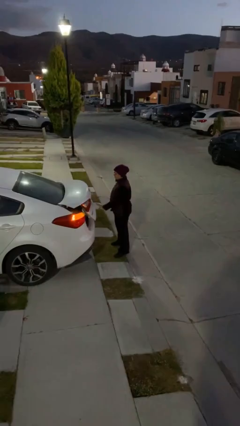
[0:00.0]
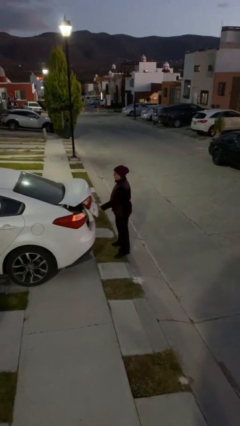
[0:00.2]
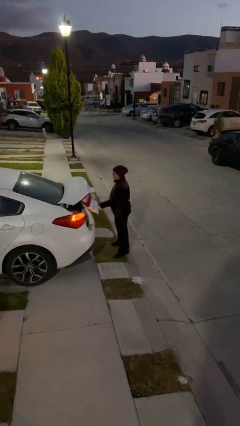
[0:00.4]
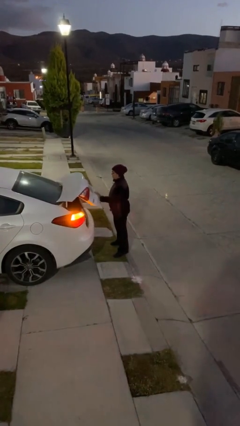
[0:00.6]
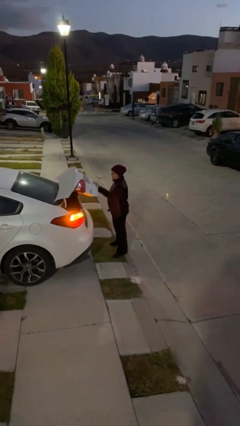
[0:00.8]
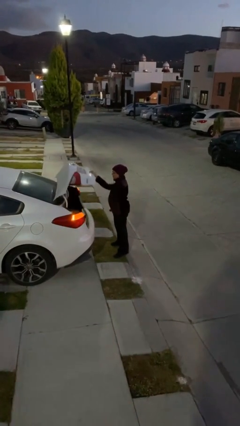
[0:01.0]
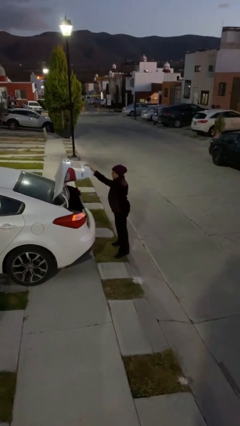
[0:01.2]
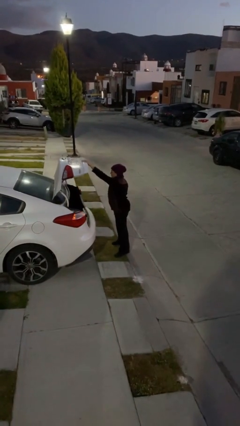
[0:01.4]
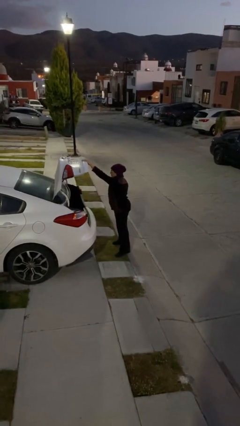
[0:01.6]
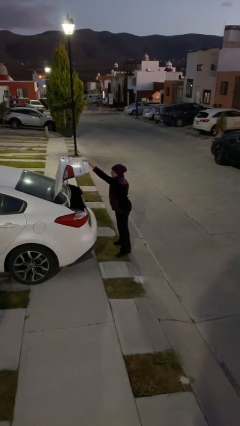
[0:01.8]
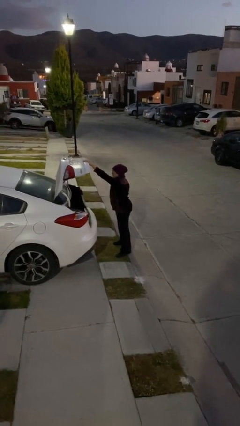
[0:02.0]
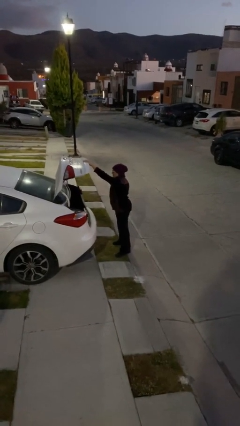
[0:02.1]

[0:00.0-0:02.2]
person opens car trunk

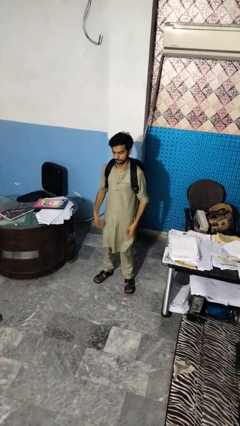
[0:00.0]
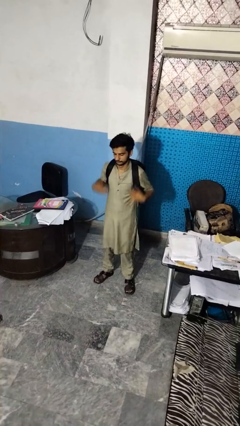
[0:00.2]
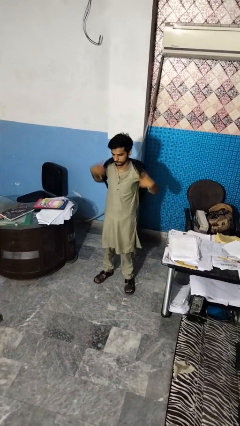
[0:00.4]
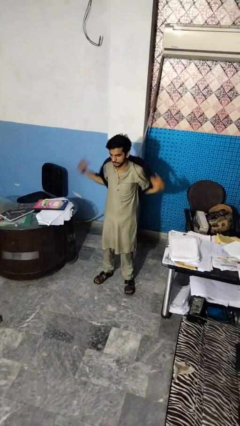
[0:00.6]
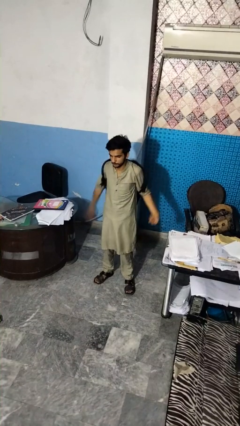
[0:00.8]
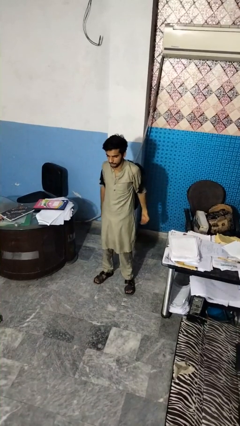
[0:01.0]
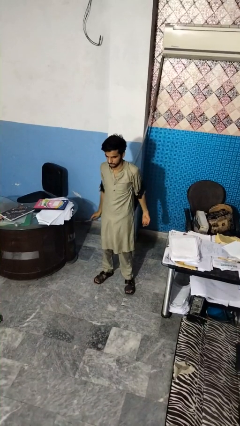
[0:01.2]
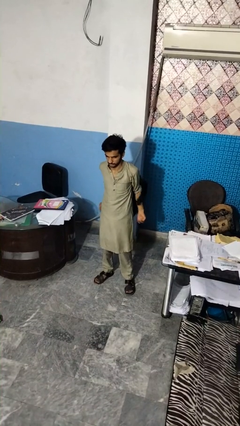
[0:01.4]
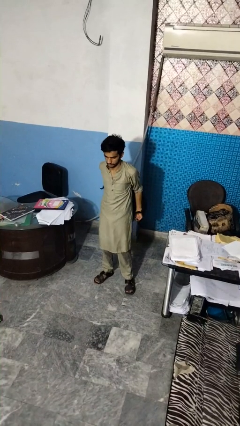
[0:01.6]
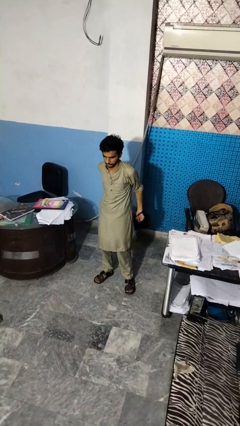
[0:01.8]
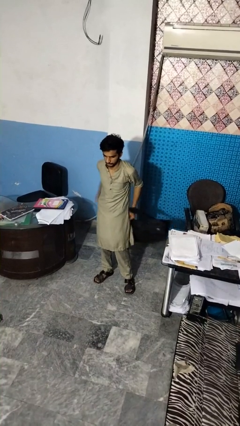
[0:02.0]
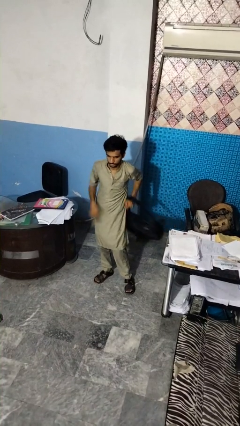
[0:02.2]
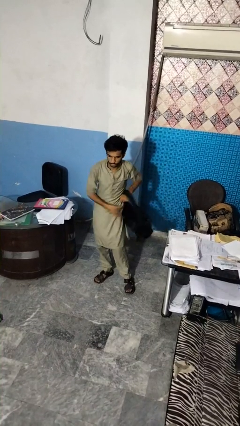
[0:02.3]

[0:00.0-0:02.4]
person takes off backpack

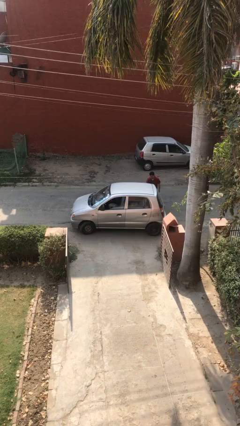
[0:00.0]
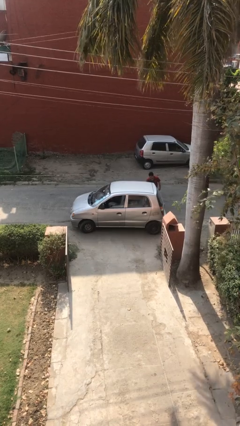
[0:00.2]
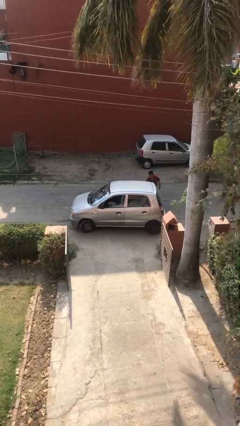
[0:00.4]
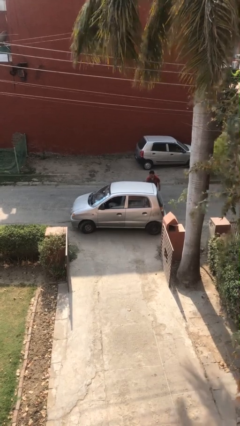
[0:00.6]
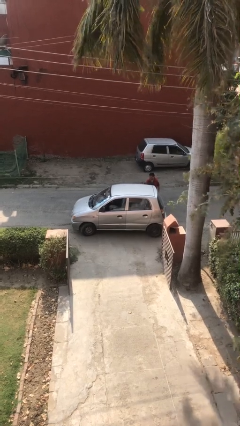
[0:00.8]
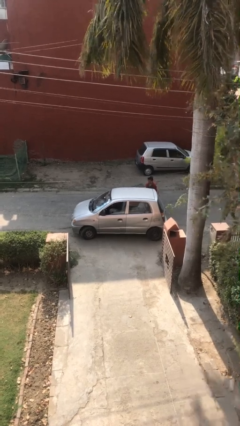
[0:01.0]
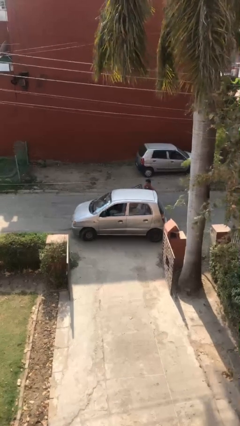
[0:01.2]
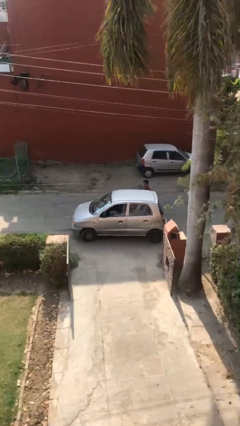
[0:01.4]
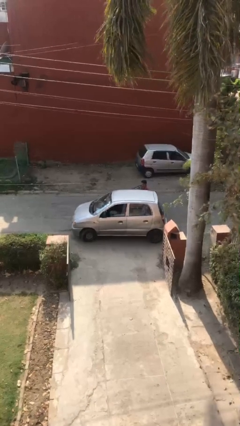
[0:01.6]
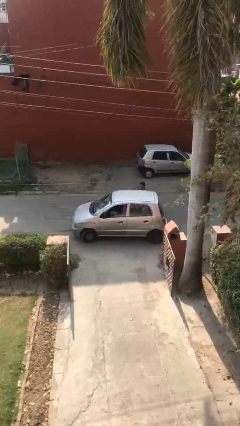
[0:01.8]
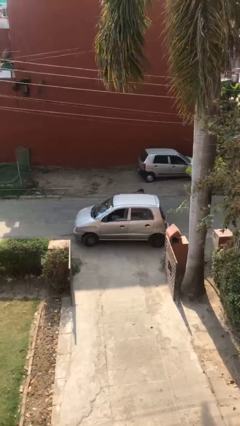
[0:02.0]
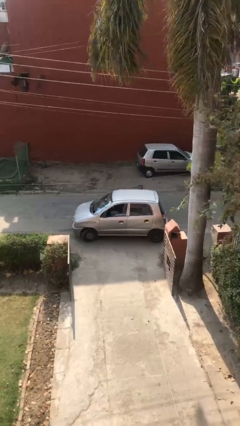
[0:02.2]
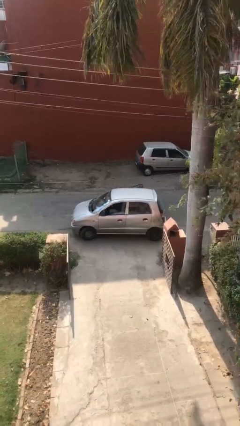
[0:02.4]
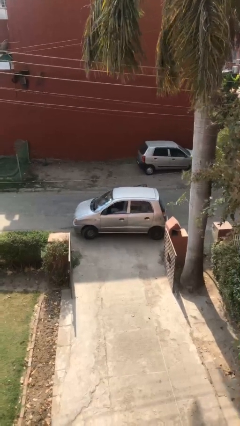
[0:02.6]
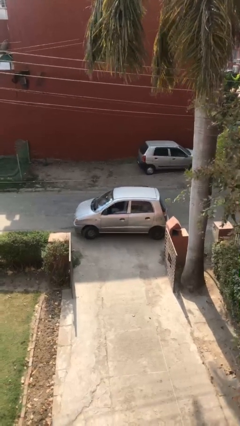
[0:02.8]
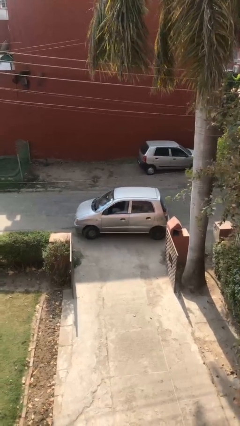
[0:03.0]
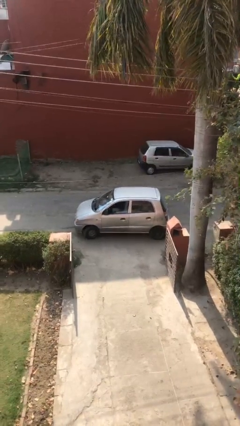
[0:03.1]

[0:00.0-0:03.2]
car picks up person

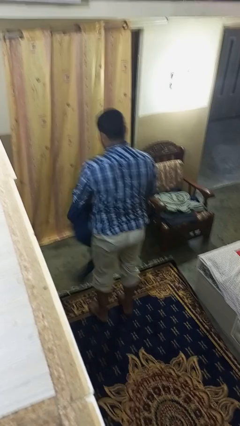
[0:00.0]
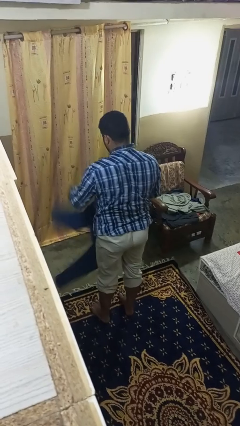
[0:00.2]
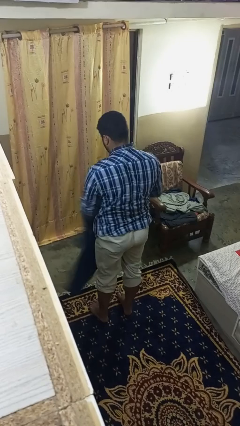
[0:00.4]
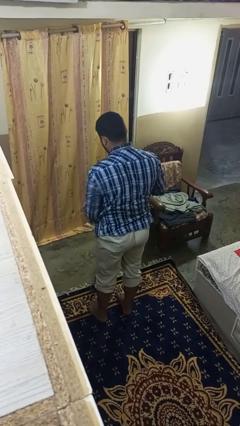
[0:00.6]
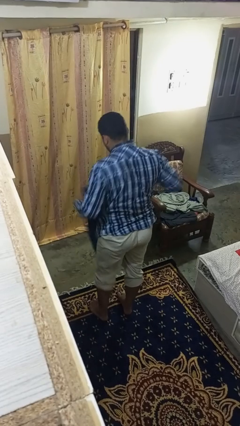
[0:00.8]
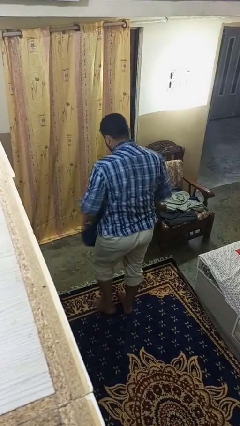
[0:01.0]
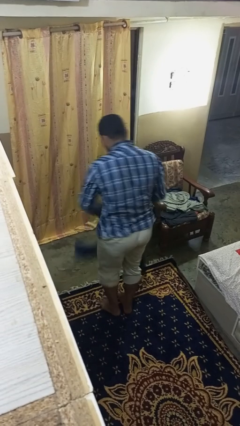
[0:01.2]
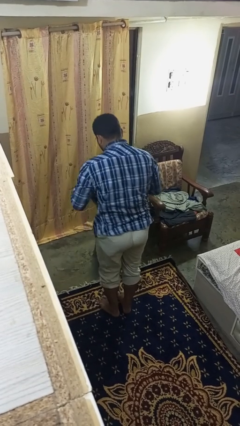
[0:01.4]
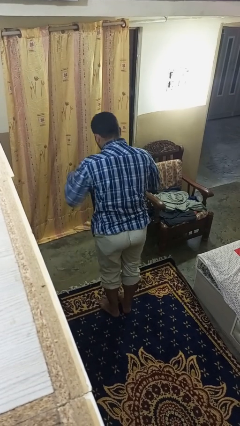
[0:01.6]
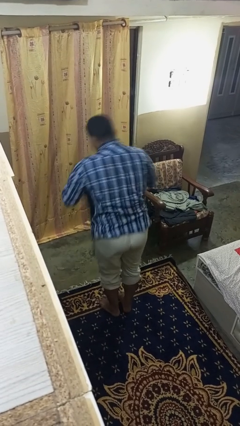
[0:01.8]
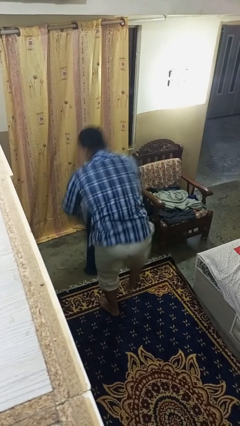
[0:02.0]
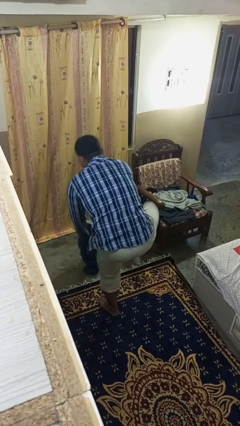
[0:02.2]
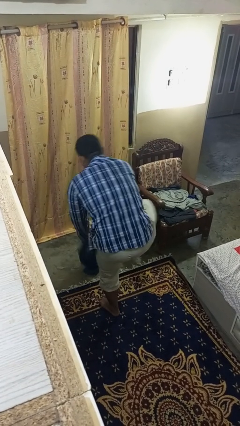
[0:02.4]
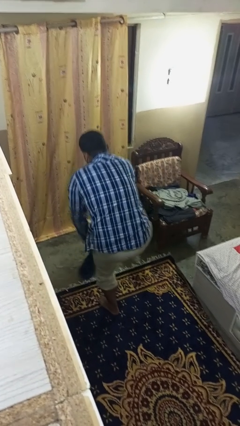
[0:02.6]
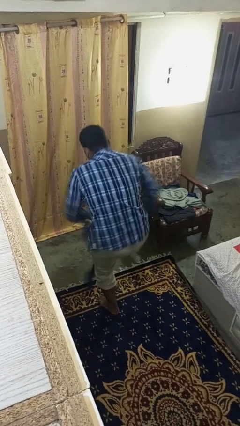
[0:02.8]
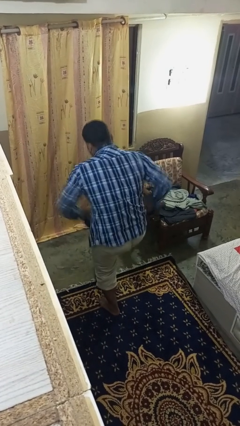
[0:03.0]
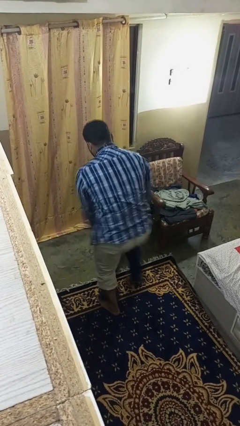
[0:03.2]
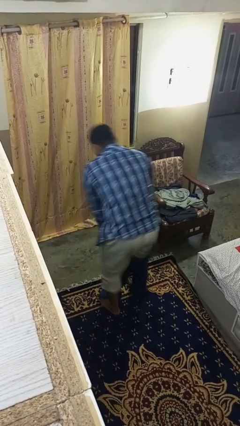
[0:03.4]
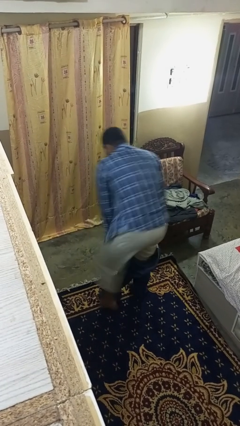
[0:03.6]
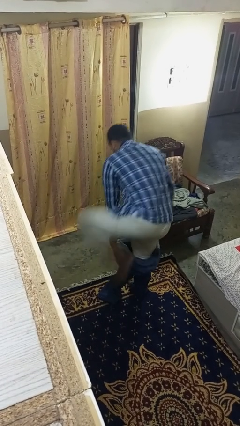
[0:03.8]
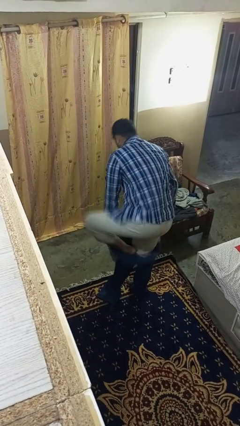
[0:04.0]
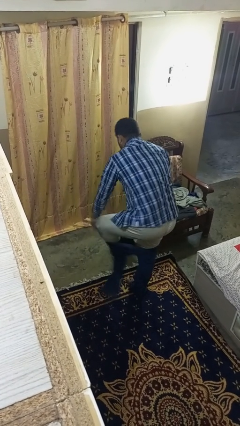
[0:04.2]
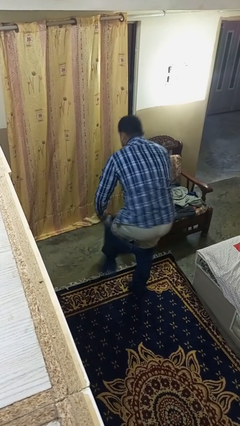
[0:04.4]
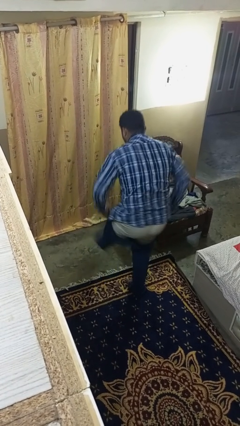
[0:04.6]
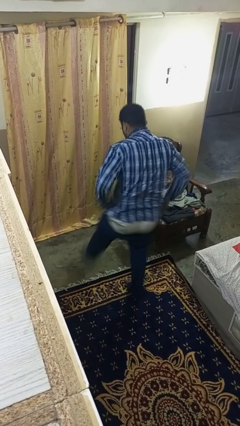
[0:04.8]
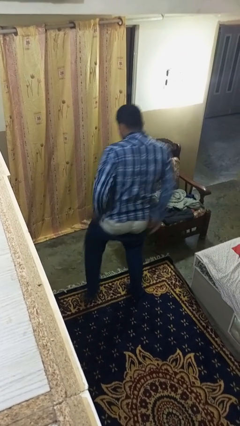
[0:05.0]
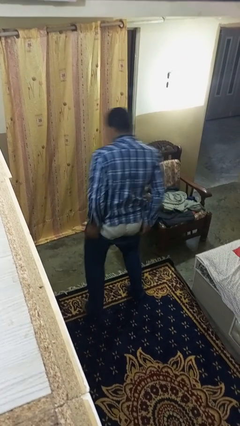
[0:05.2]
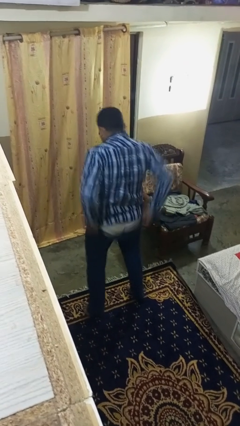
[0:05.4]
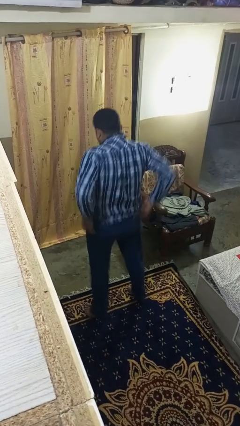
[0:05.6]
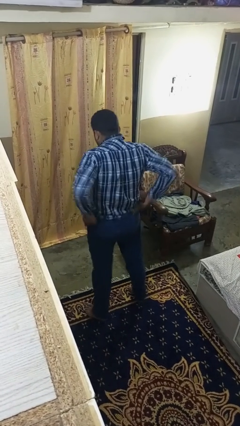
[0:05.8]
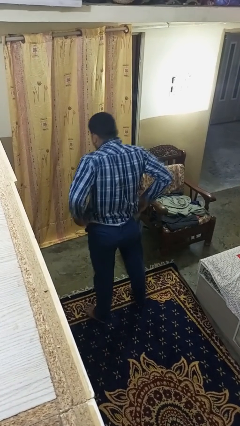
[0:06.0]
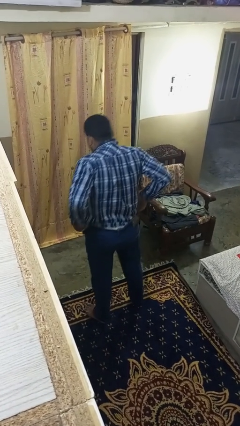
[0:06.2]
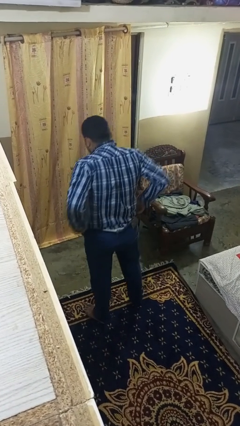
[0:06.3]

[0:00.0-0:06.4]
person puts on pants

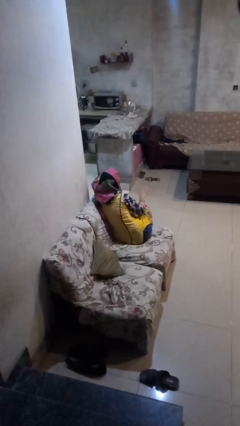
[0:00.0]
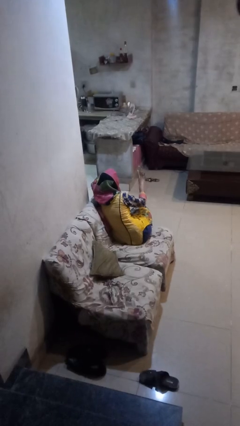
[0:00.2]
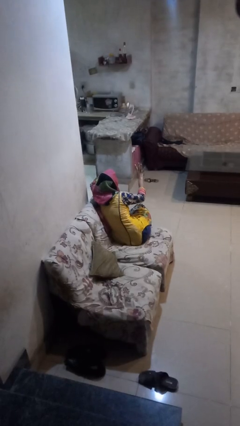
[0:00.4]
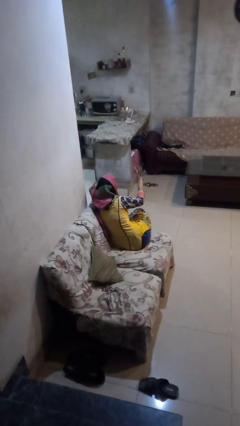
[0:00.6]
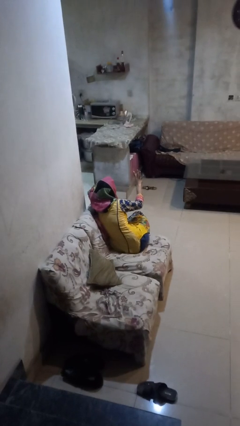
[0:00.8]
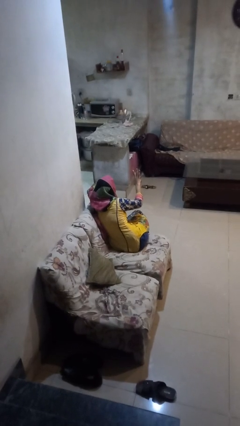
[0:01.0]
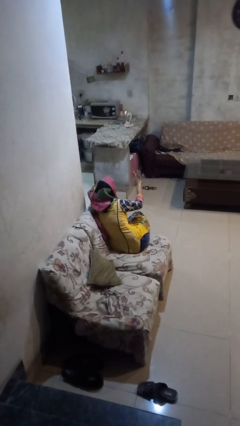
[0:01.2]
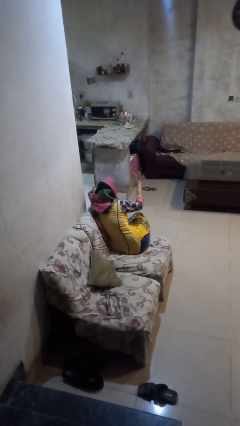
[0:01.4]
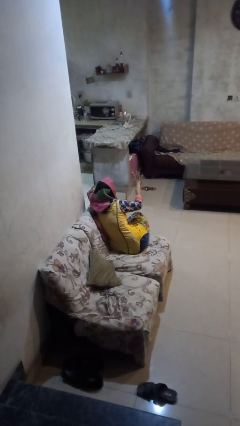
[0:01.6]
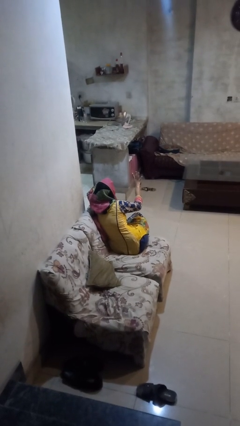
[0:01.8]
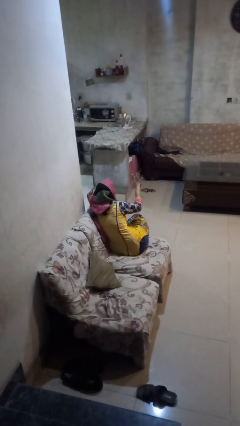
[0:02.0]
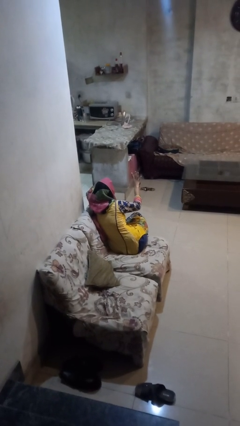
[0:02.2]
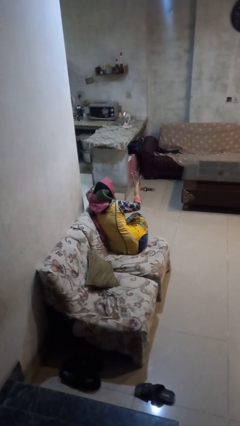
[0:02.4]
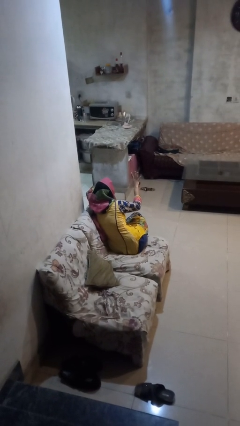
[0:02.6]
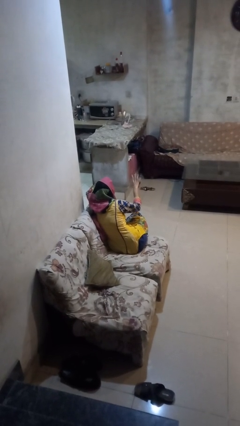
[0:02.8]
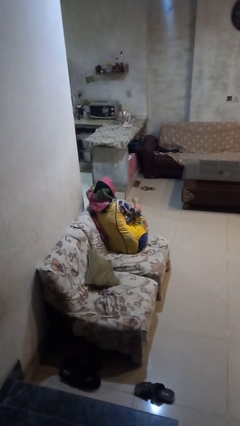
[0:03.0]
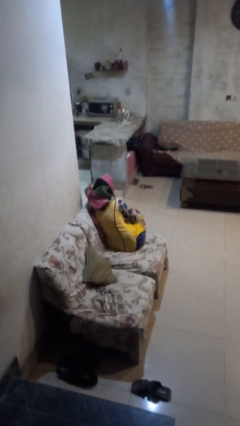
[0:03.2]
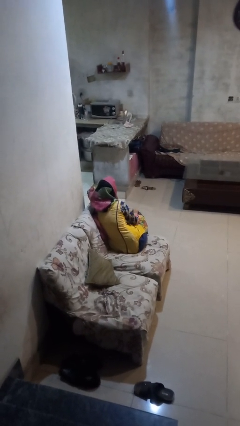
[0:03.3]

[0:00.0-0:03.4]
person gestures number four

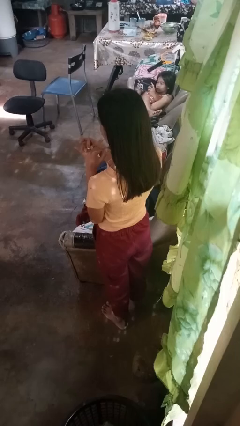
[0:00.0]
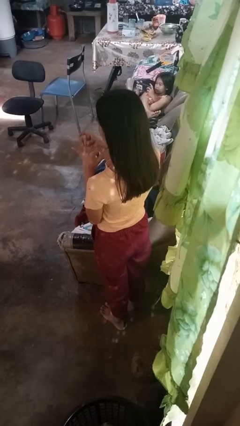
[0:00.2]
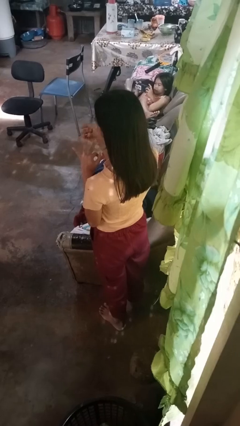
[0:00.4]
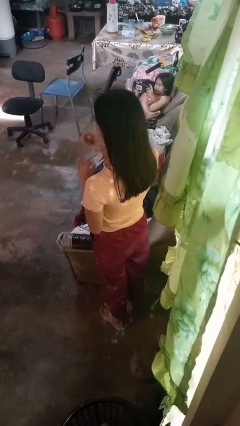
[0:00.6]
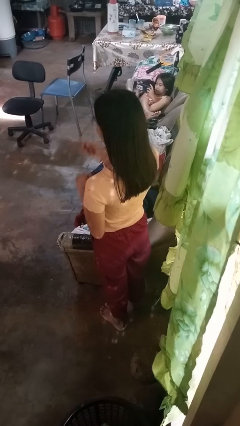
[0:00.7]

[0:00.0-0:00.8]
person takes off ring
